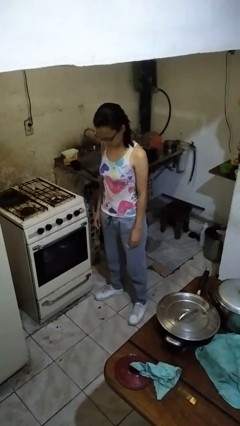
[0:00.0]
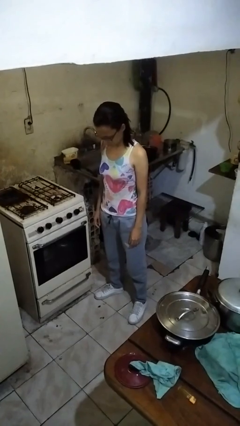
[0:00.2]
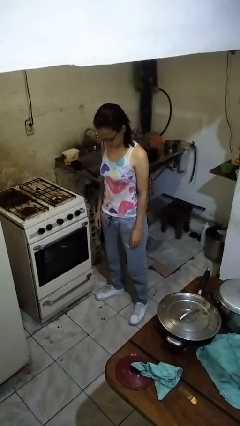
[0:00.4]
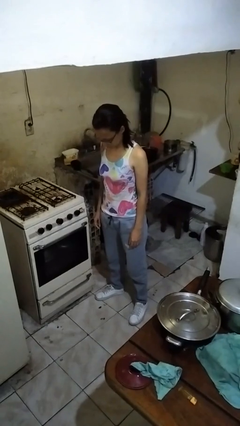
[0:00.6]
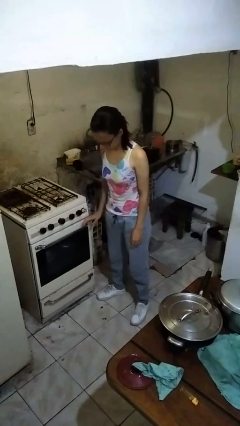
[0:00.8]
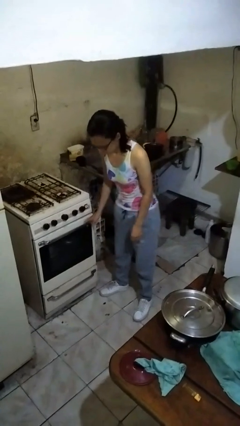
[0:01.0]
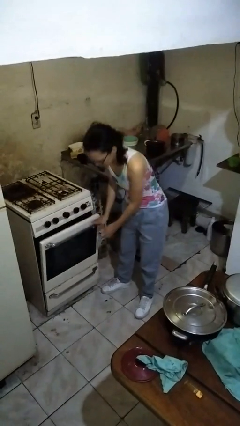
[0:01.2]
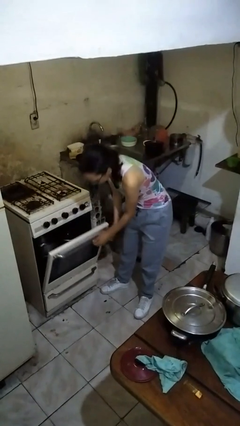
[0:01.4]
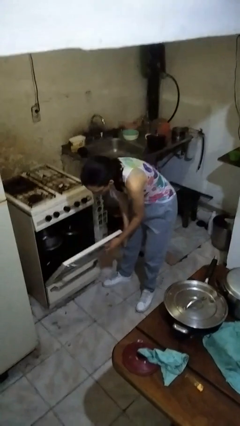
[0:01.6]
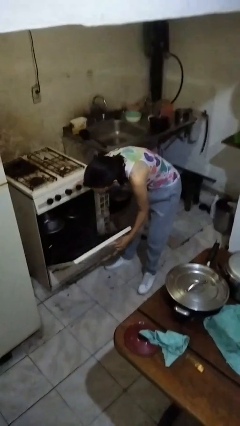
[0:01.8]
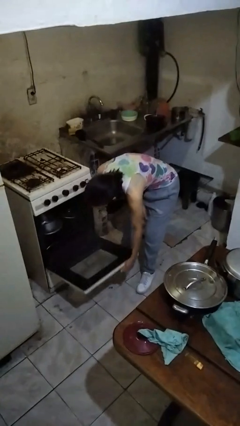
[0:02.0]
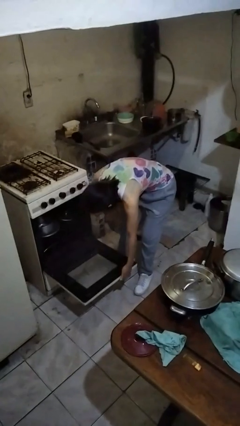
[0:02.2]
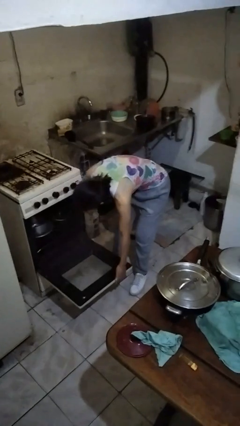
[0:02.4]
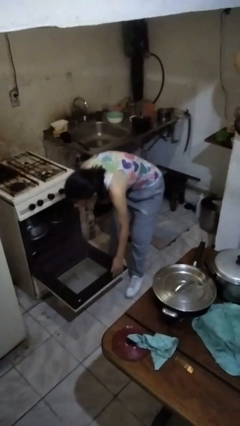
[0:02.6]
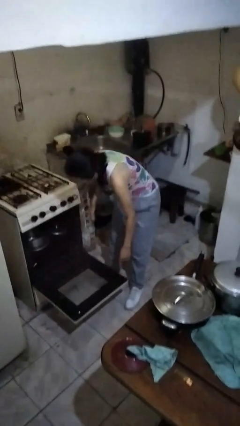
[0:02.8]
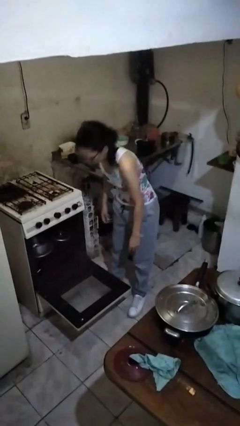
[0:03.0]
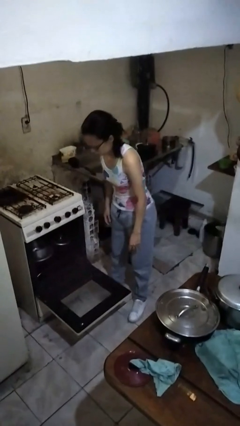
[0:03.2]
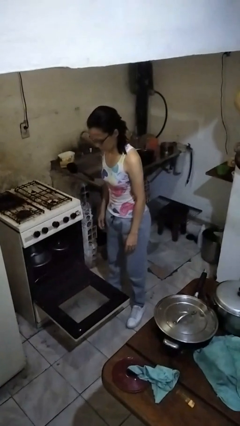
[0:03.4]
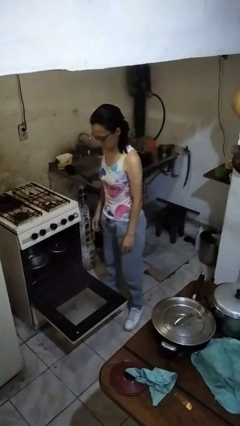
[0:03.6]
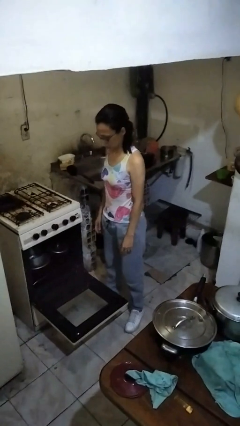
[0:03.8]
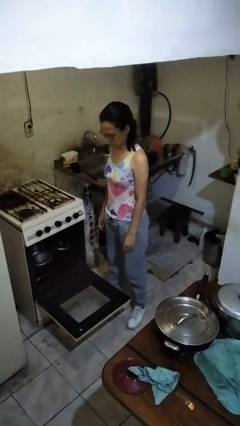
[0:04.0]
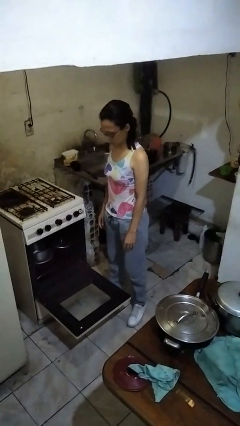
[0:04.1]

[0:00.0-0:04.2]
person opens oven door

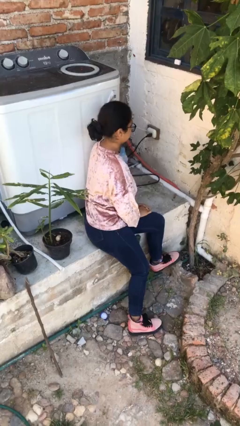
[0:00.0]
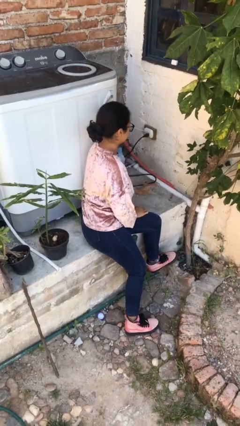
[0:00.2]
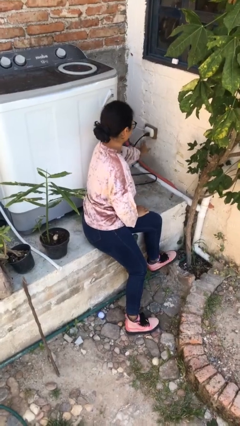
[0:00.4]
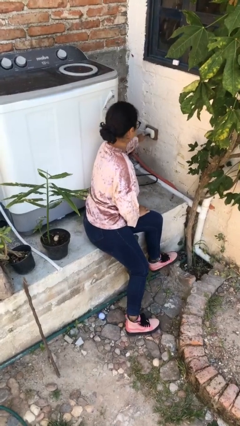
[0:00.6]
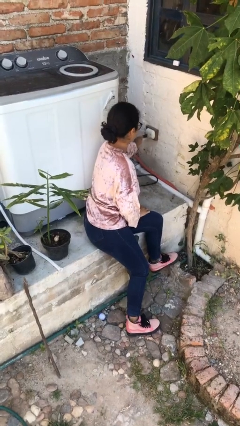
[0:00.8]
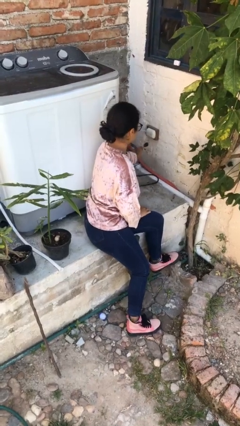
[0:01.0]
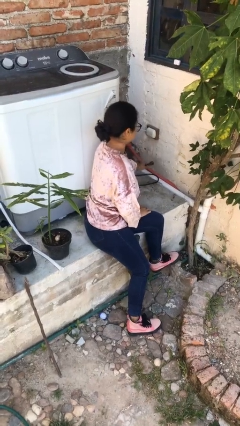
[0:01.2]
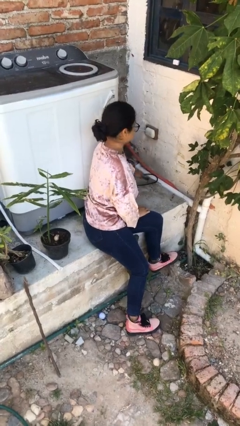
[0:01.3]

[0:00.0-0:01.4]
person unplugs from electrical socket

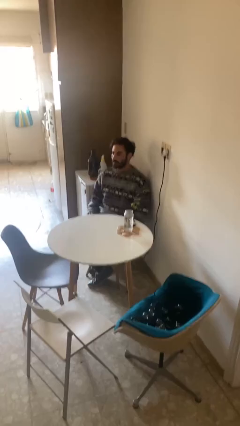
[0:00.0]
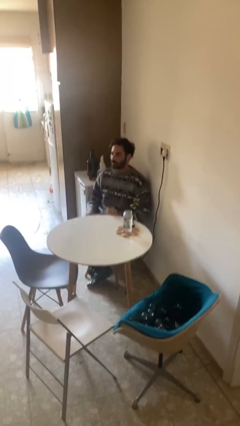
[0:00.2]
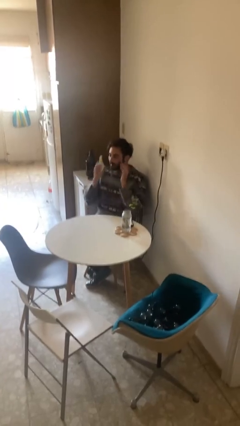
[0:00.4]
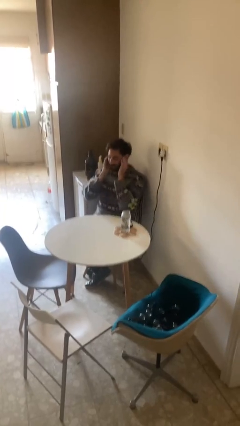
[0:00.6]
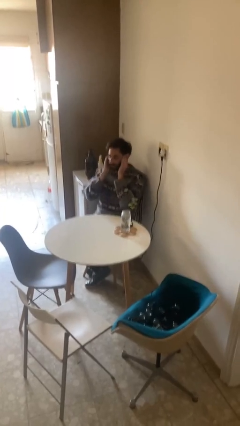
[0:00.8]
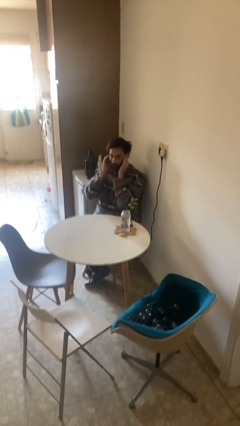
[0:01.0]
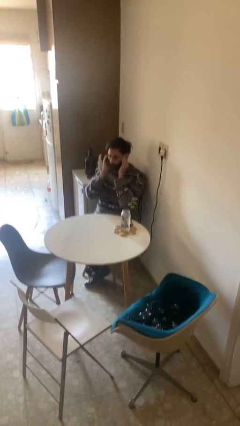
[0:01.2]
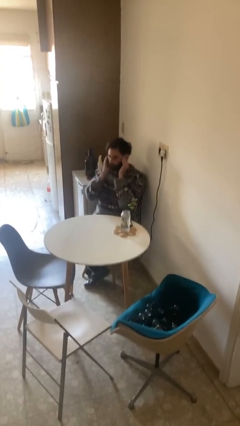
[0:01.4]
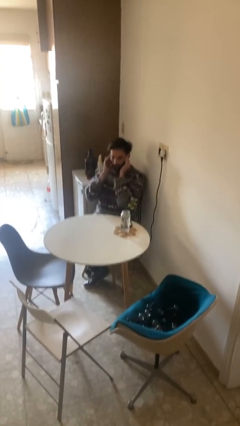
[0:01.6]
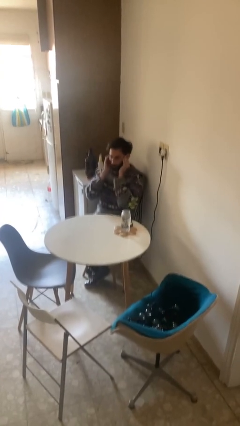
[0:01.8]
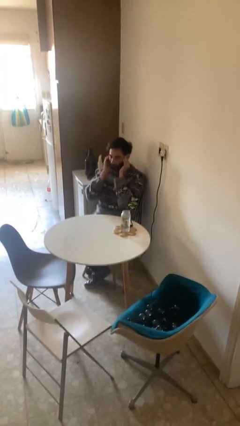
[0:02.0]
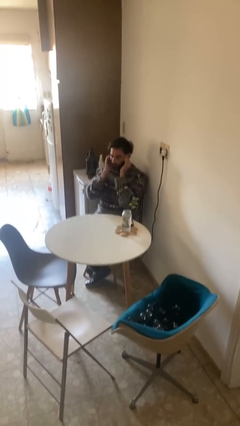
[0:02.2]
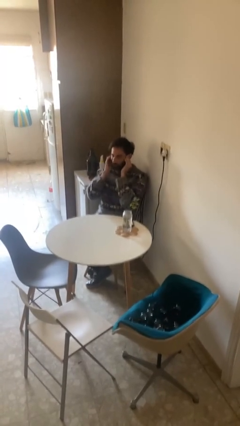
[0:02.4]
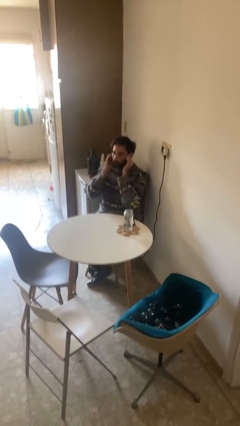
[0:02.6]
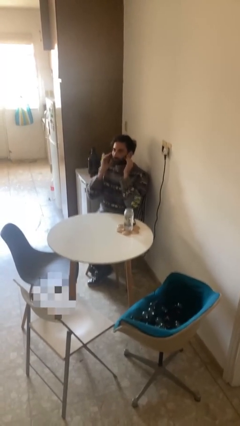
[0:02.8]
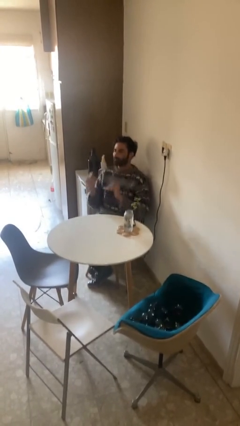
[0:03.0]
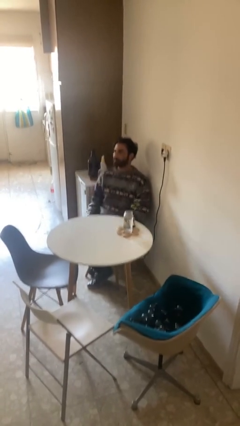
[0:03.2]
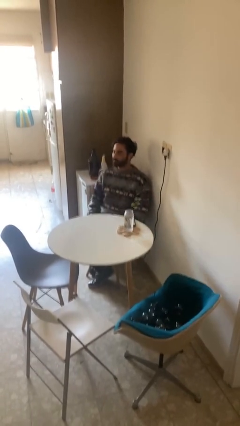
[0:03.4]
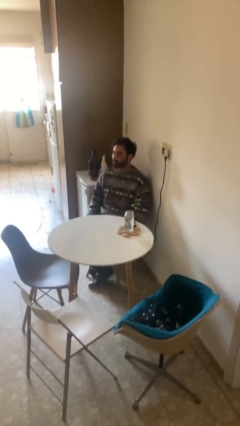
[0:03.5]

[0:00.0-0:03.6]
person puts fingers in ear

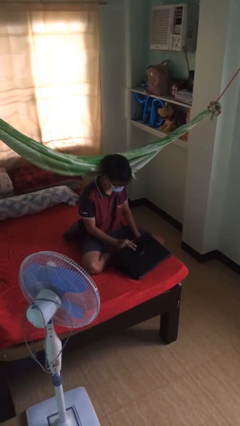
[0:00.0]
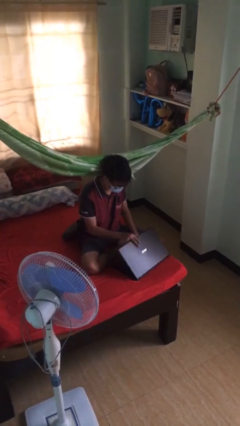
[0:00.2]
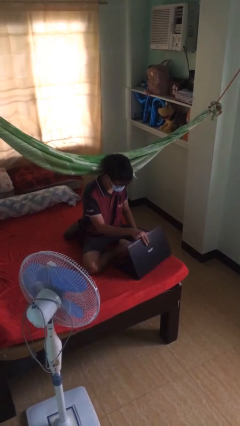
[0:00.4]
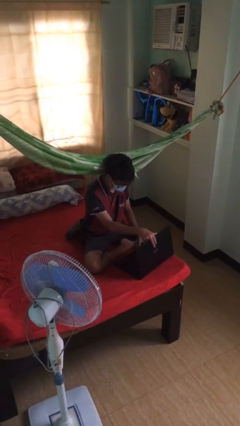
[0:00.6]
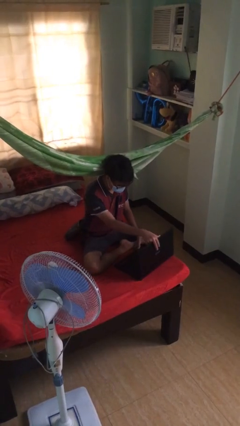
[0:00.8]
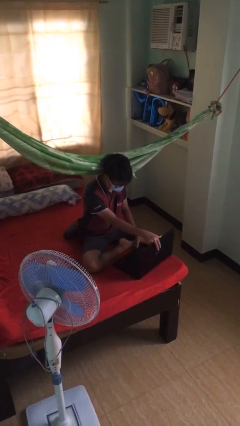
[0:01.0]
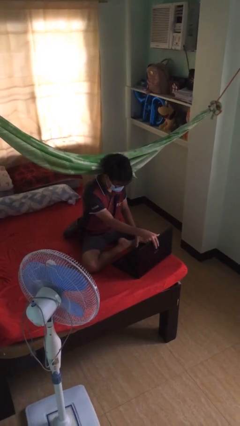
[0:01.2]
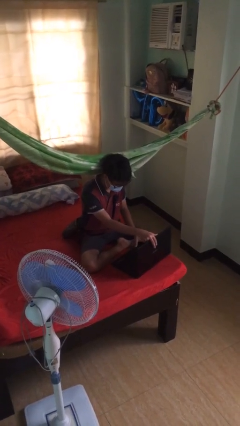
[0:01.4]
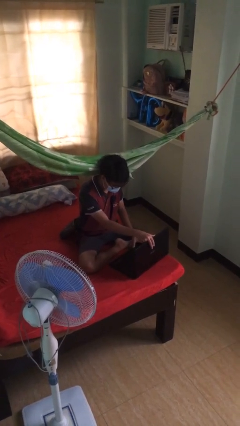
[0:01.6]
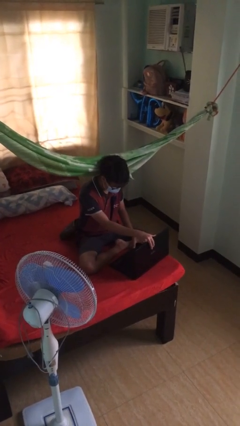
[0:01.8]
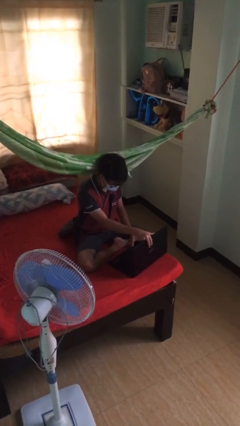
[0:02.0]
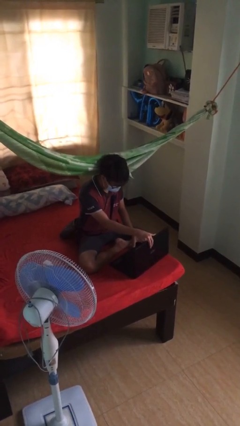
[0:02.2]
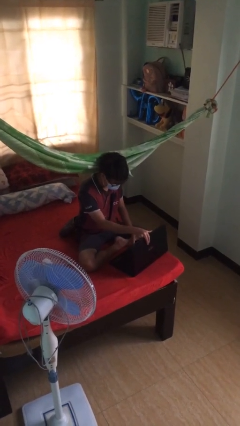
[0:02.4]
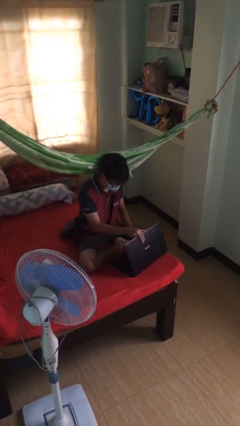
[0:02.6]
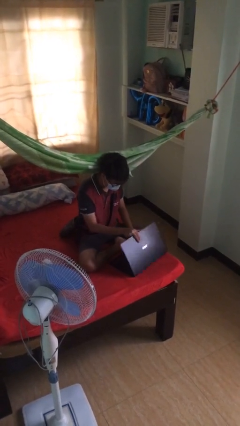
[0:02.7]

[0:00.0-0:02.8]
person interacts with laptop

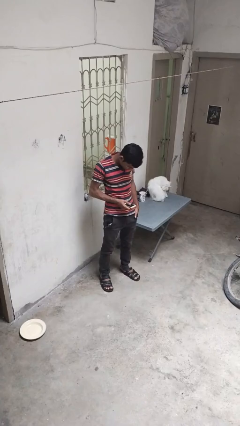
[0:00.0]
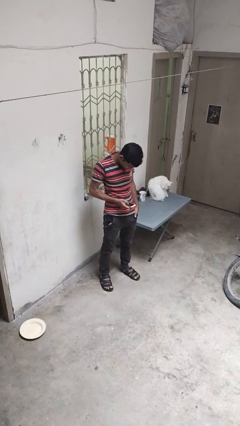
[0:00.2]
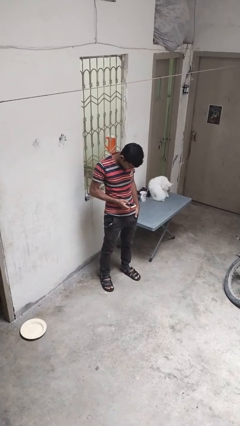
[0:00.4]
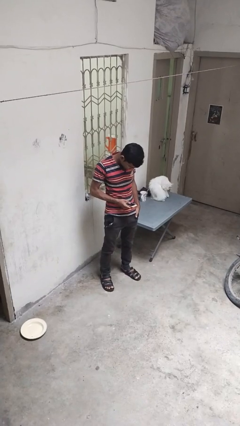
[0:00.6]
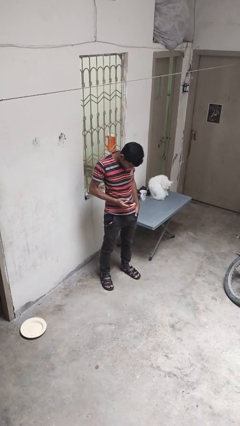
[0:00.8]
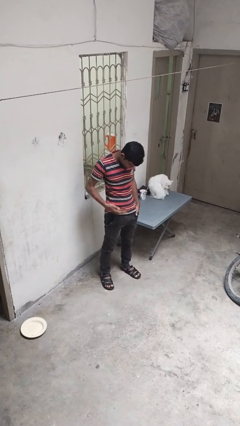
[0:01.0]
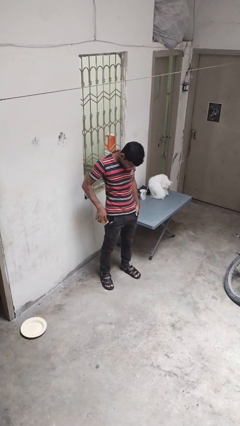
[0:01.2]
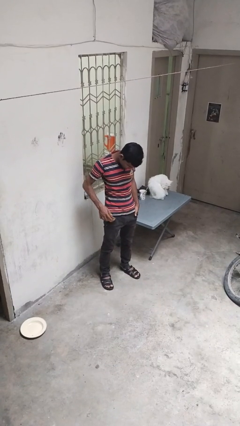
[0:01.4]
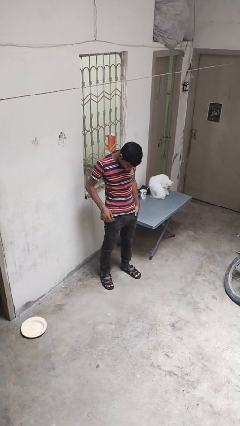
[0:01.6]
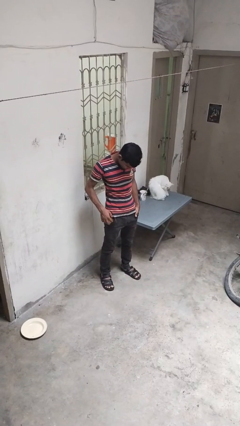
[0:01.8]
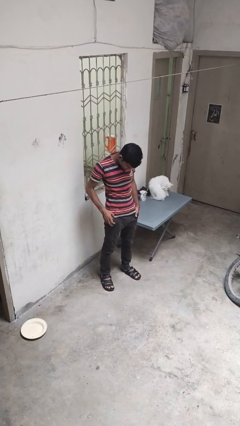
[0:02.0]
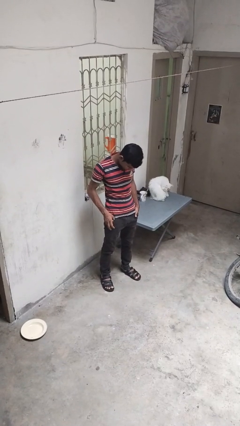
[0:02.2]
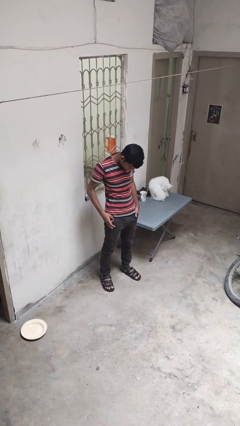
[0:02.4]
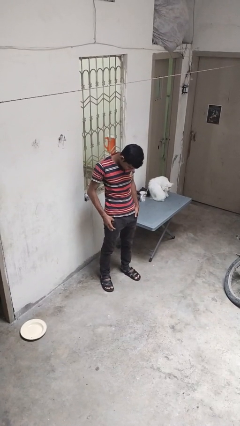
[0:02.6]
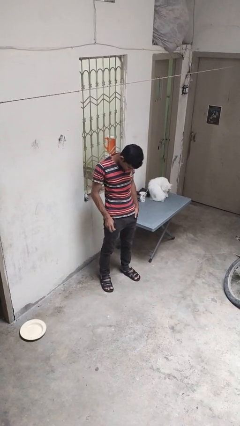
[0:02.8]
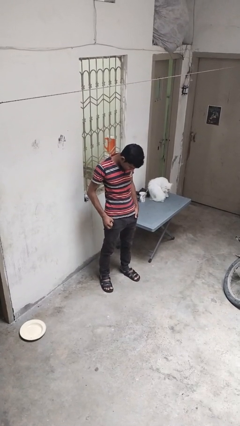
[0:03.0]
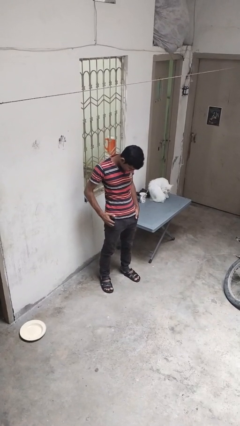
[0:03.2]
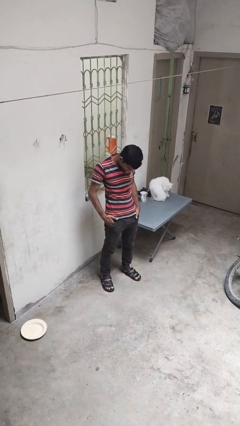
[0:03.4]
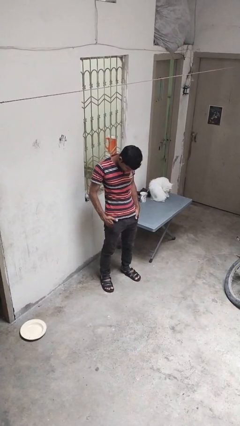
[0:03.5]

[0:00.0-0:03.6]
person puts phone into pocket

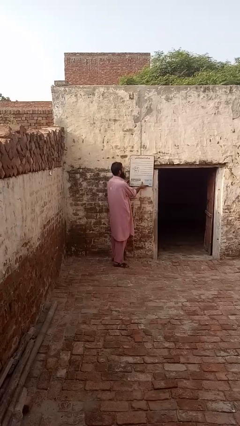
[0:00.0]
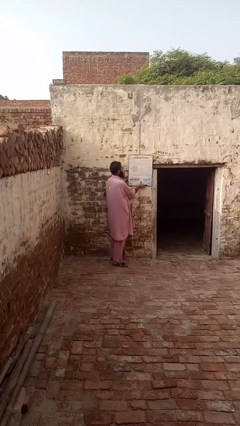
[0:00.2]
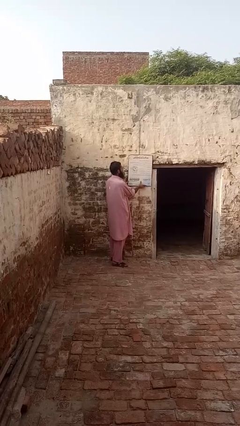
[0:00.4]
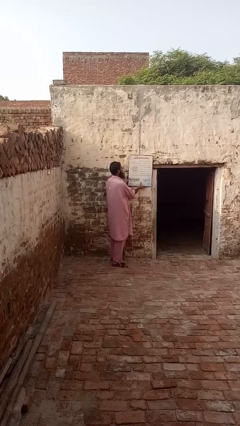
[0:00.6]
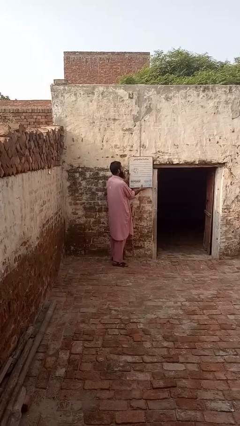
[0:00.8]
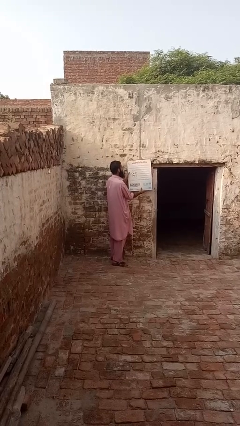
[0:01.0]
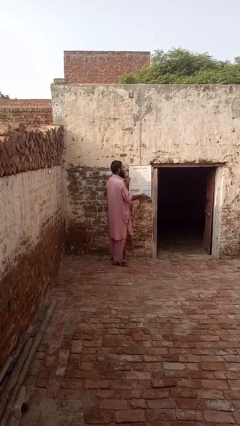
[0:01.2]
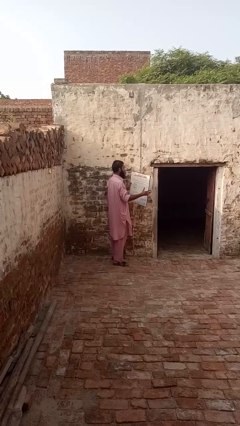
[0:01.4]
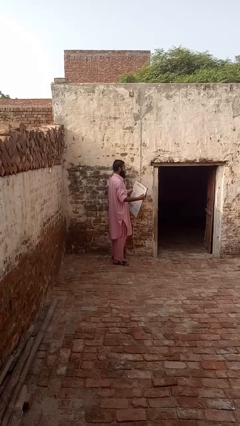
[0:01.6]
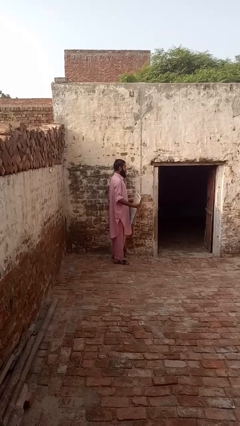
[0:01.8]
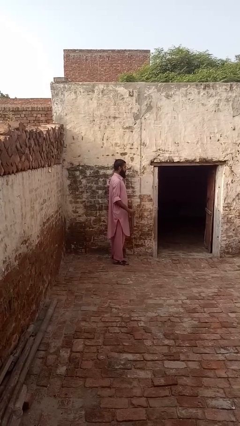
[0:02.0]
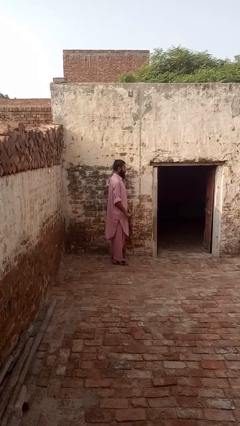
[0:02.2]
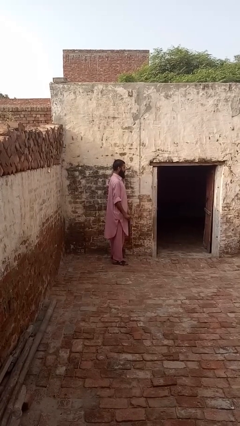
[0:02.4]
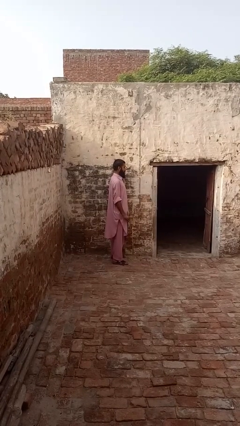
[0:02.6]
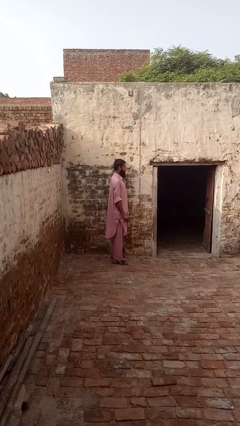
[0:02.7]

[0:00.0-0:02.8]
person takes down picture frame
